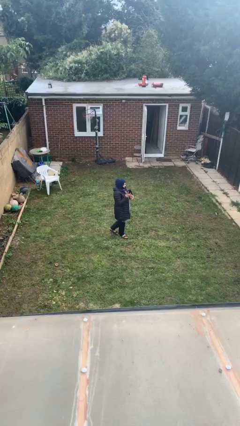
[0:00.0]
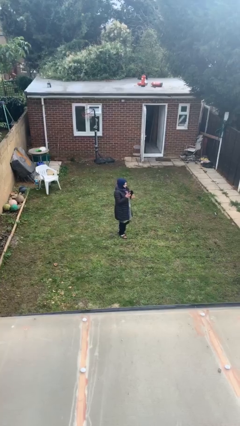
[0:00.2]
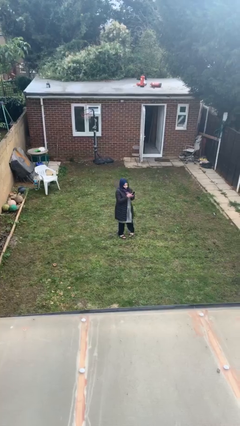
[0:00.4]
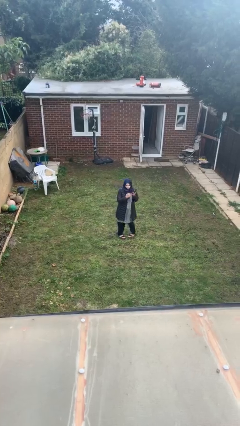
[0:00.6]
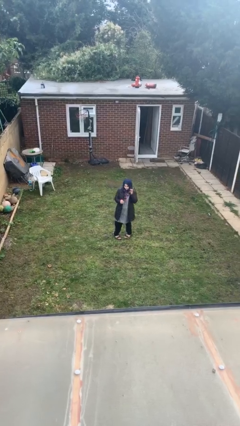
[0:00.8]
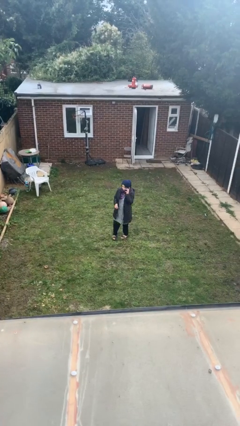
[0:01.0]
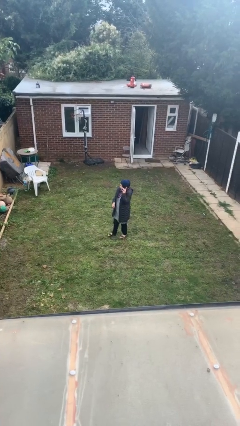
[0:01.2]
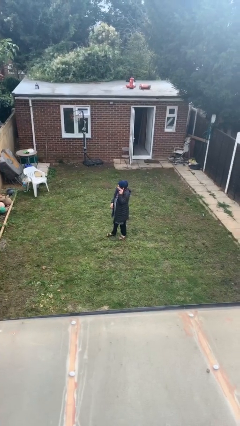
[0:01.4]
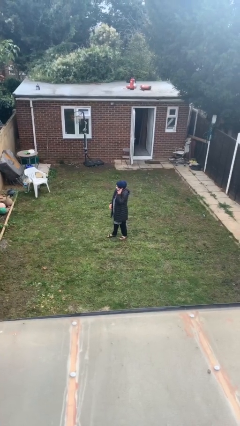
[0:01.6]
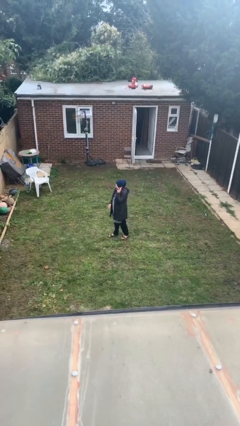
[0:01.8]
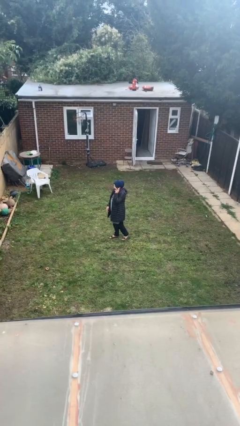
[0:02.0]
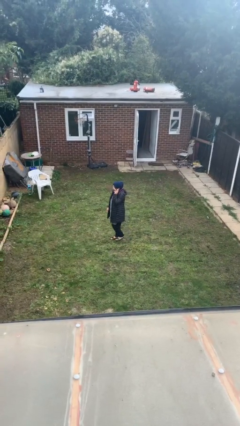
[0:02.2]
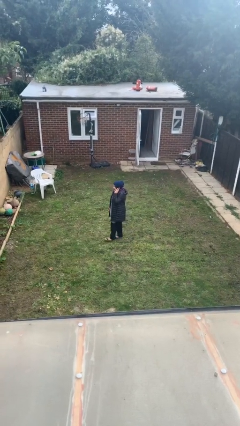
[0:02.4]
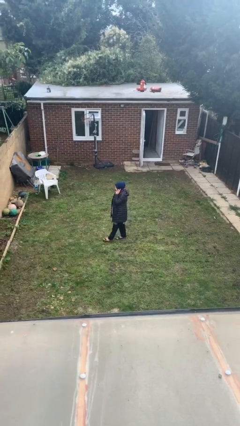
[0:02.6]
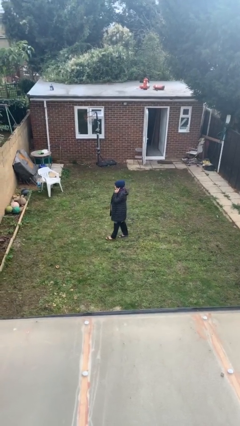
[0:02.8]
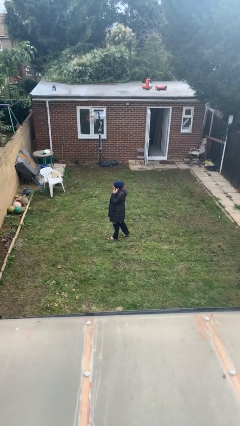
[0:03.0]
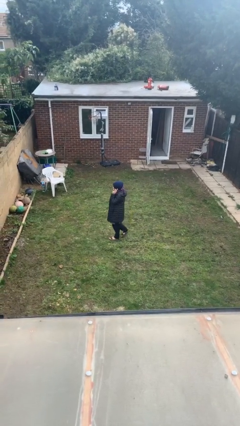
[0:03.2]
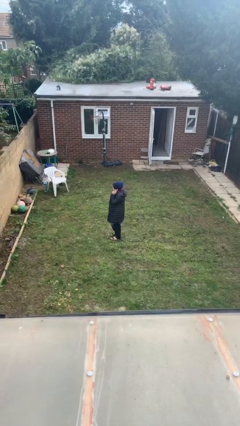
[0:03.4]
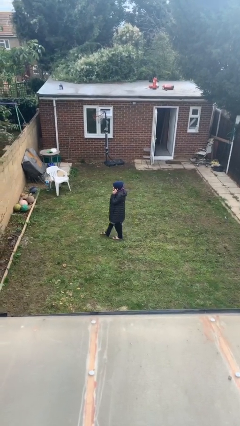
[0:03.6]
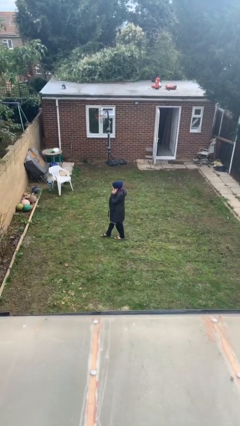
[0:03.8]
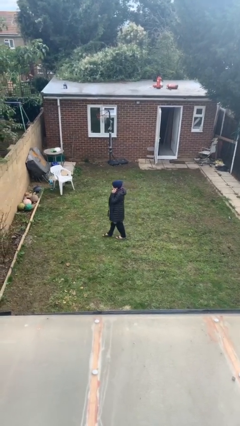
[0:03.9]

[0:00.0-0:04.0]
person talks on phone

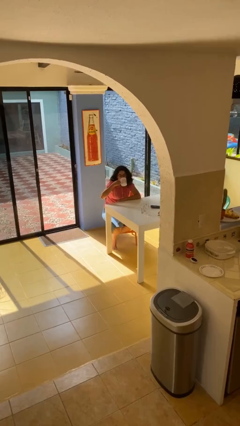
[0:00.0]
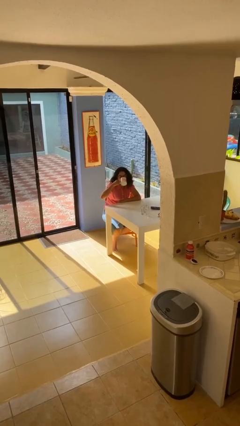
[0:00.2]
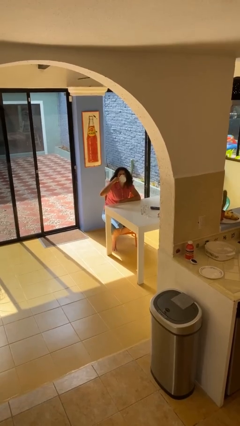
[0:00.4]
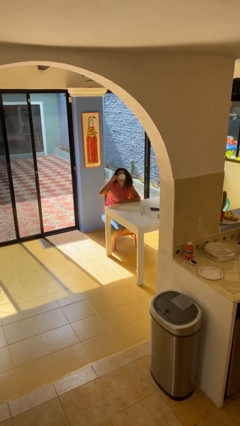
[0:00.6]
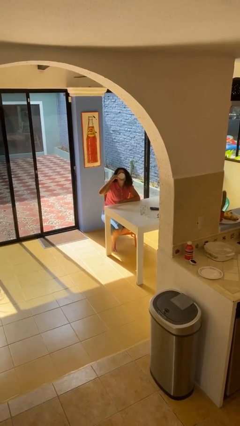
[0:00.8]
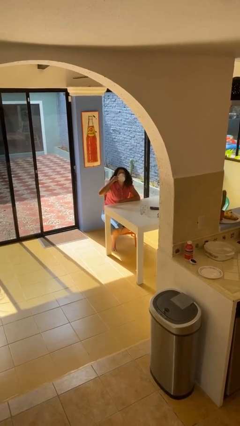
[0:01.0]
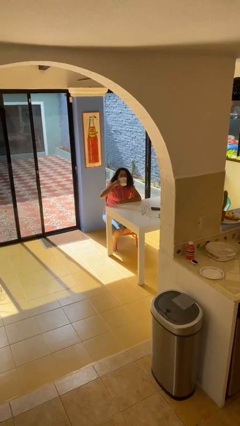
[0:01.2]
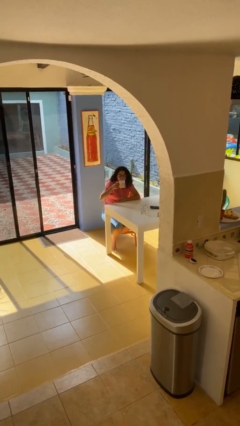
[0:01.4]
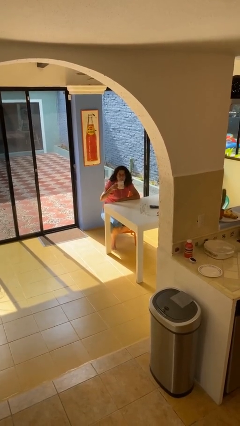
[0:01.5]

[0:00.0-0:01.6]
person drinks from mug

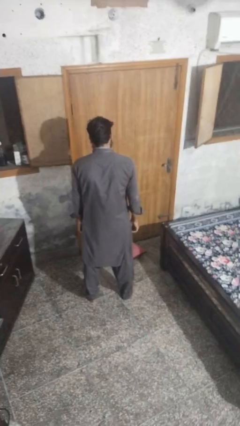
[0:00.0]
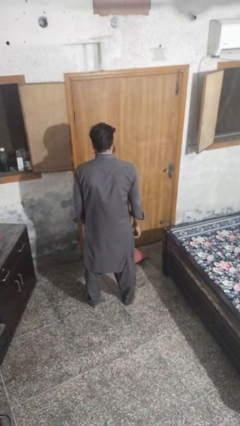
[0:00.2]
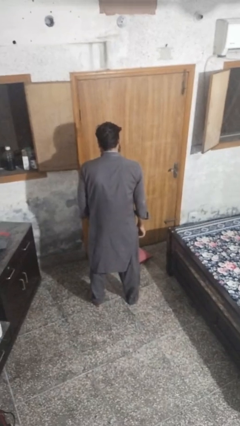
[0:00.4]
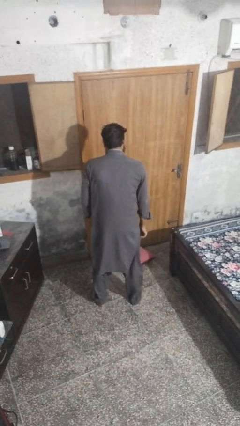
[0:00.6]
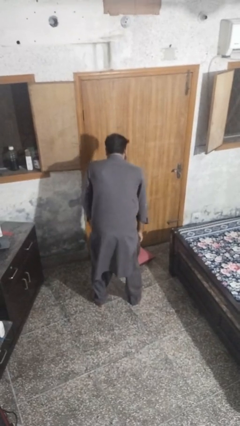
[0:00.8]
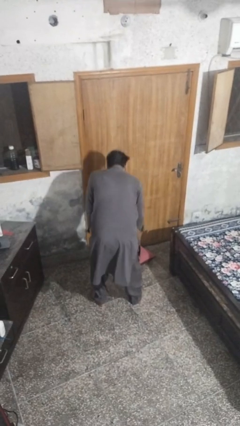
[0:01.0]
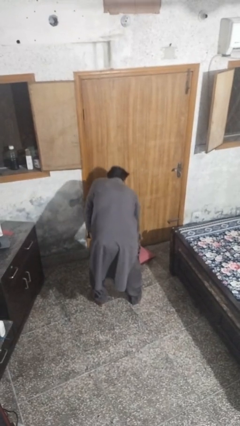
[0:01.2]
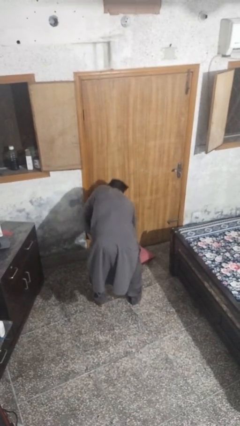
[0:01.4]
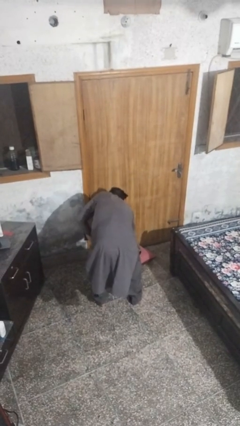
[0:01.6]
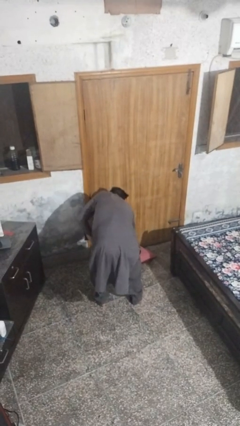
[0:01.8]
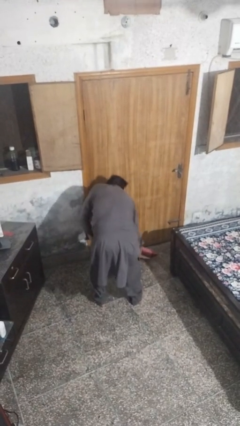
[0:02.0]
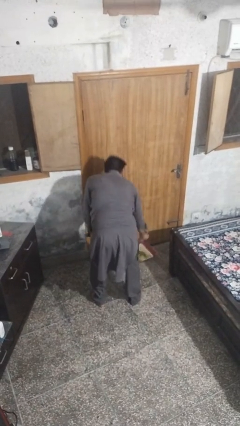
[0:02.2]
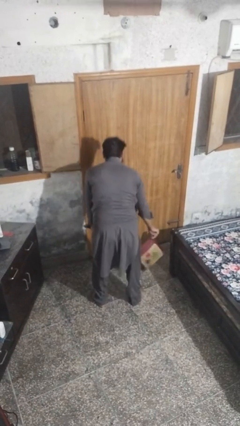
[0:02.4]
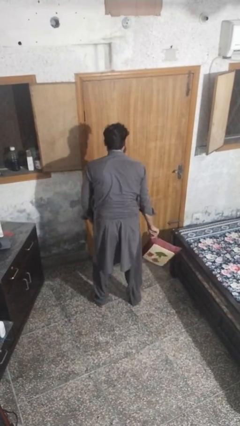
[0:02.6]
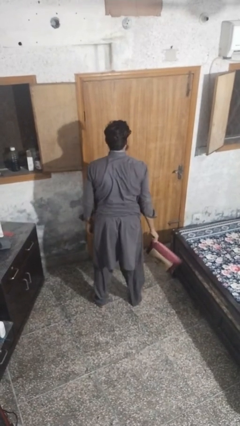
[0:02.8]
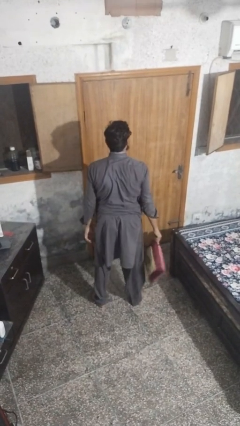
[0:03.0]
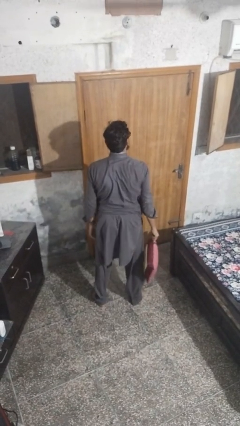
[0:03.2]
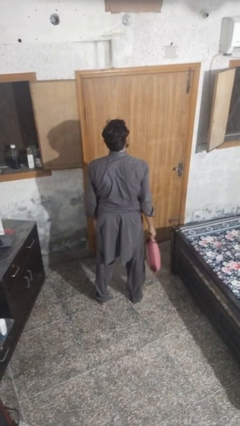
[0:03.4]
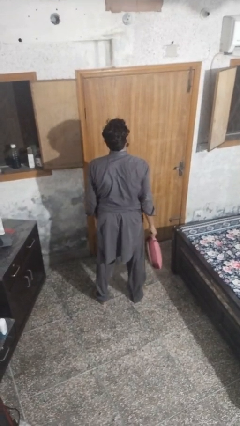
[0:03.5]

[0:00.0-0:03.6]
person picks up object from floor

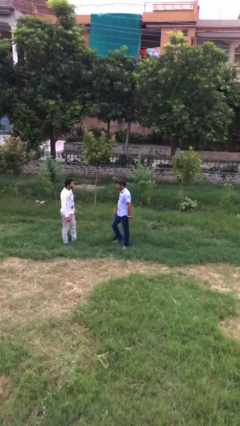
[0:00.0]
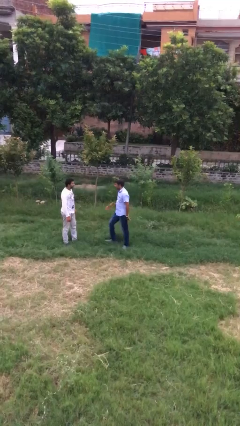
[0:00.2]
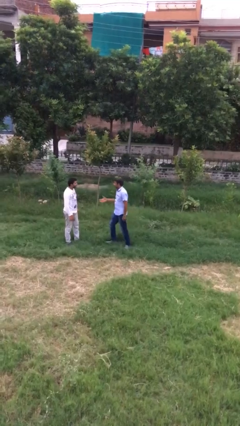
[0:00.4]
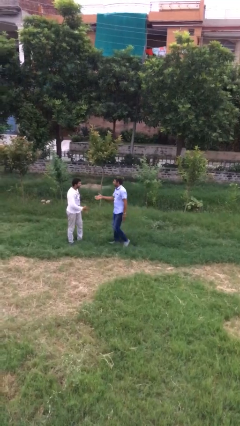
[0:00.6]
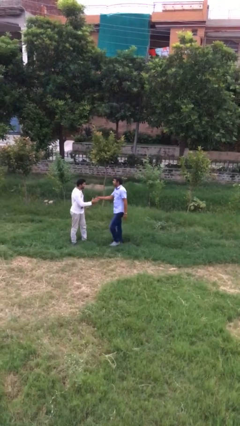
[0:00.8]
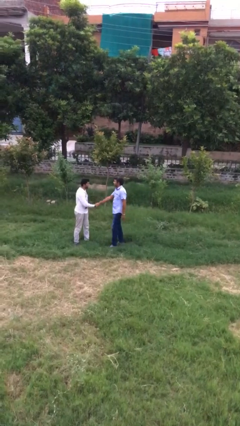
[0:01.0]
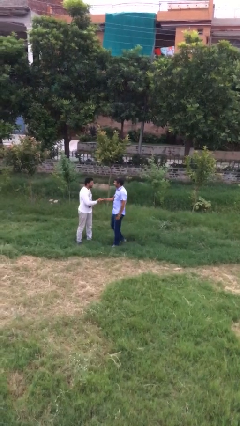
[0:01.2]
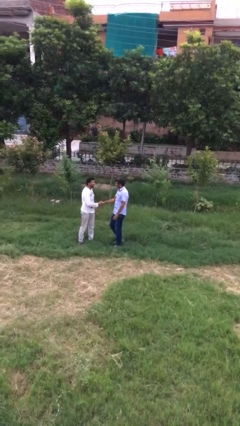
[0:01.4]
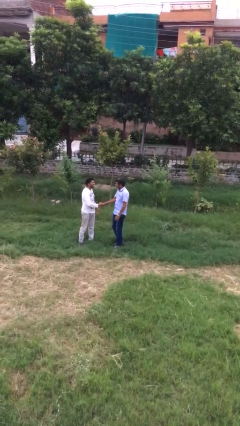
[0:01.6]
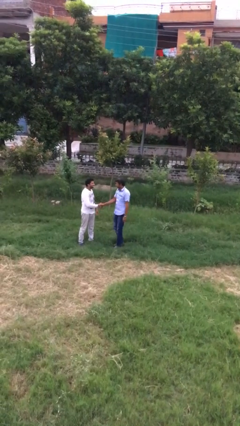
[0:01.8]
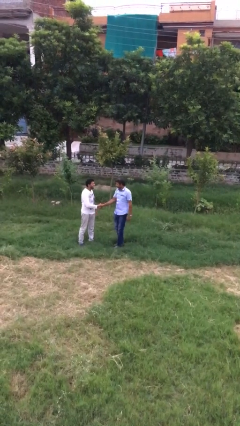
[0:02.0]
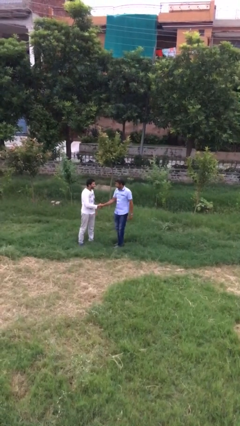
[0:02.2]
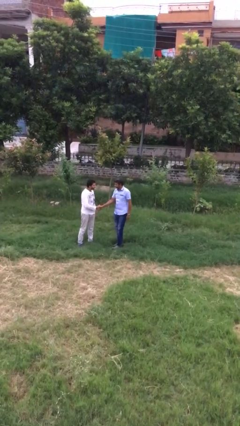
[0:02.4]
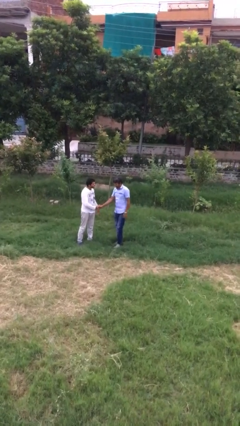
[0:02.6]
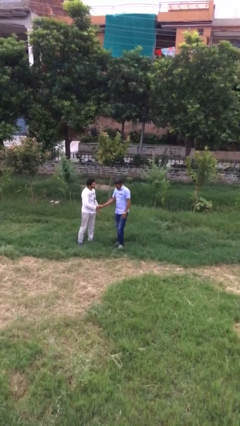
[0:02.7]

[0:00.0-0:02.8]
person shakes hand

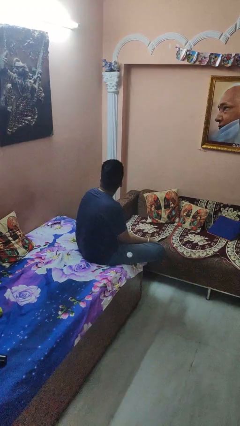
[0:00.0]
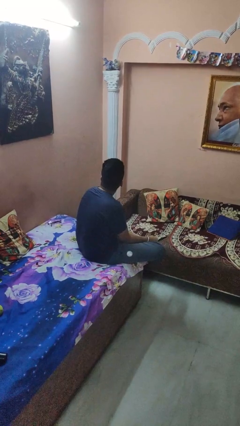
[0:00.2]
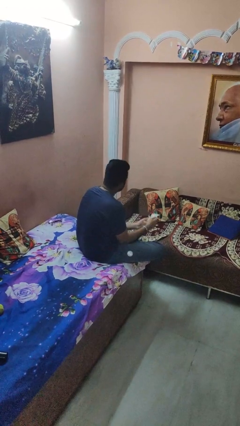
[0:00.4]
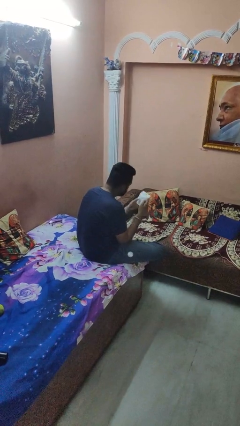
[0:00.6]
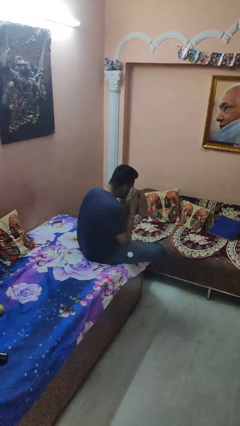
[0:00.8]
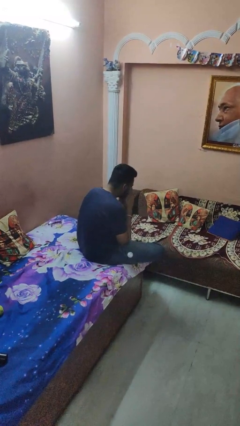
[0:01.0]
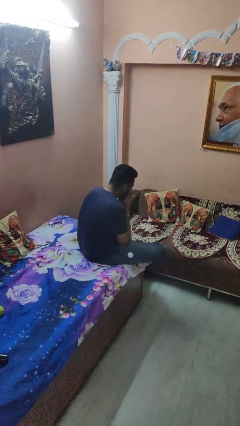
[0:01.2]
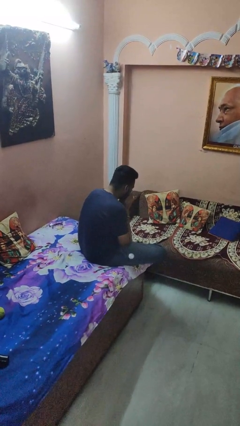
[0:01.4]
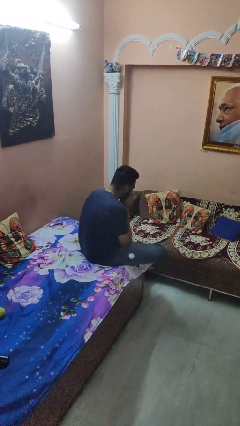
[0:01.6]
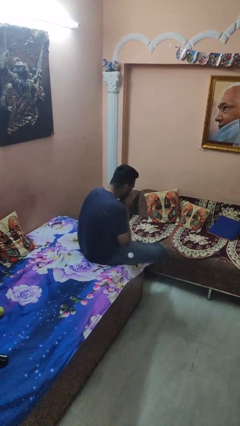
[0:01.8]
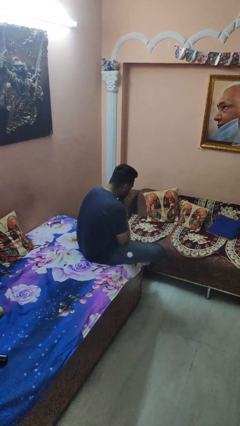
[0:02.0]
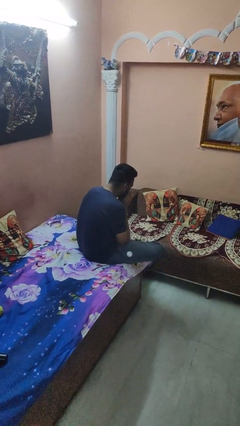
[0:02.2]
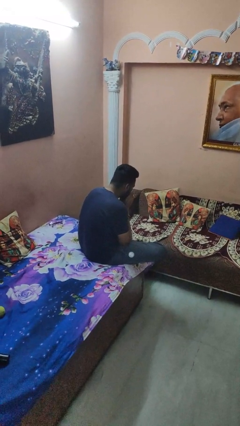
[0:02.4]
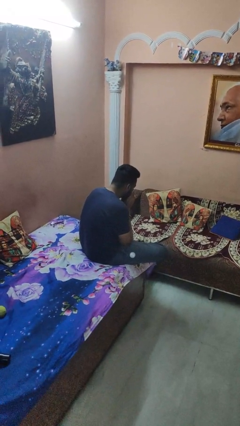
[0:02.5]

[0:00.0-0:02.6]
person blows nose

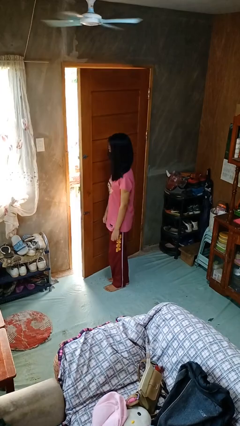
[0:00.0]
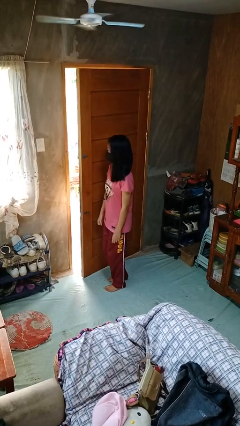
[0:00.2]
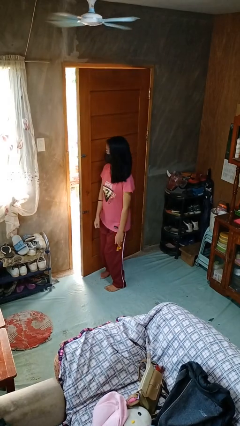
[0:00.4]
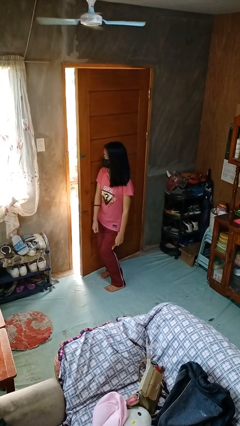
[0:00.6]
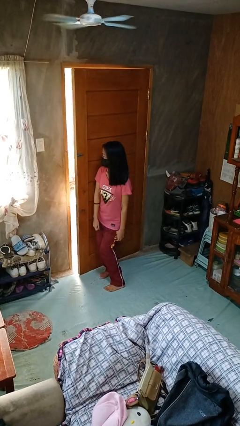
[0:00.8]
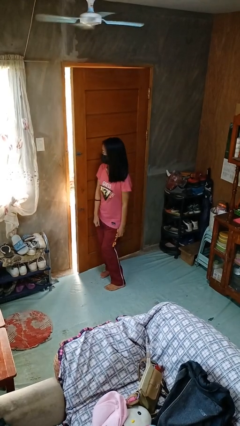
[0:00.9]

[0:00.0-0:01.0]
person closes door with hip

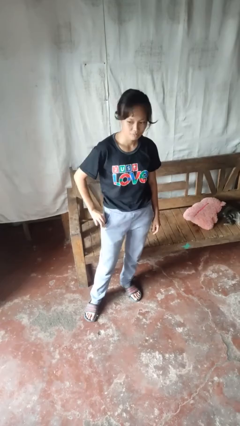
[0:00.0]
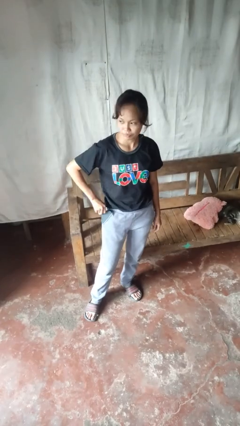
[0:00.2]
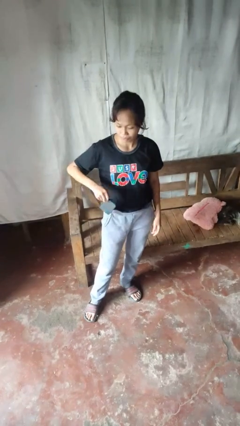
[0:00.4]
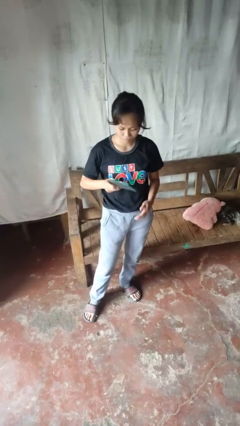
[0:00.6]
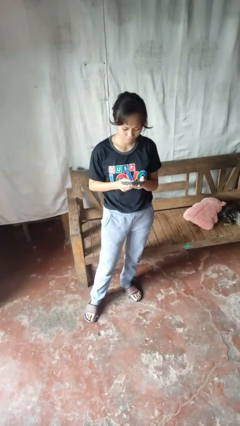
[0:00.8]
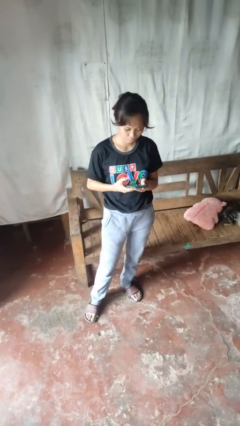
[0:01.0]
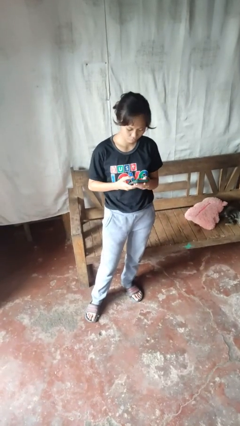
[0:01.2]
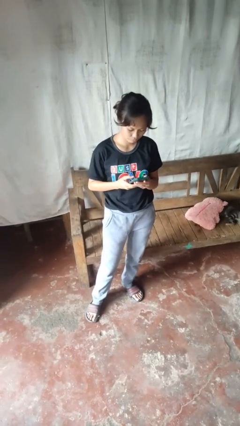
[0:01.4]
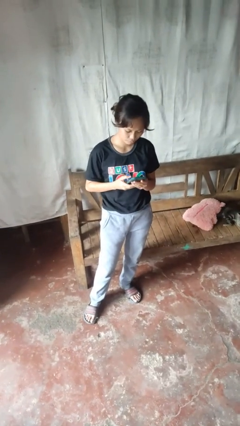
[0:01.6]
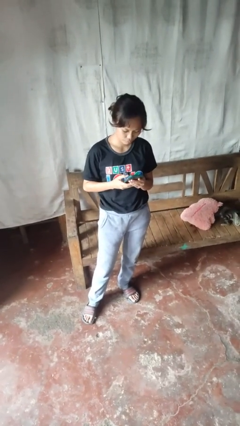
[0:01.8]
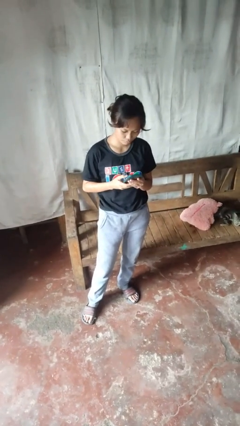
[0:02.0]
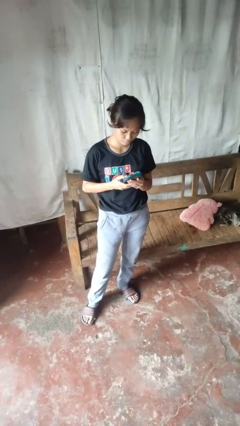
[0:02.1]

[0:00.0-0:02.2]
person takes phone from pocket
